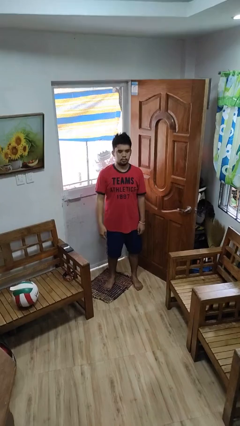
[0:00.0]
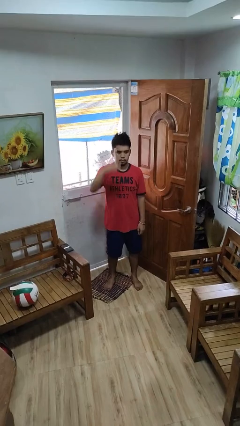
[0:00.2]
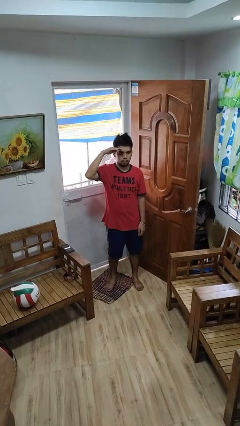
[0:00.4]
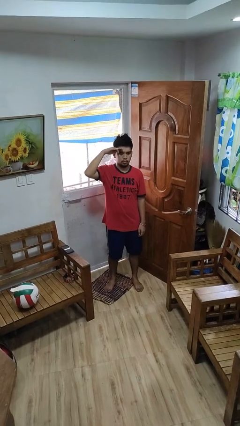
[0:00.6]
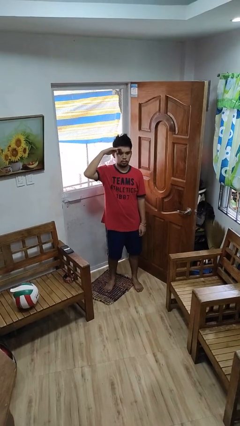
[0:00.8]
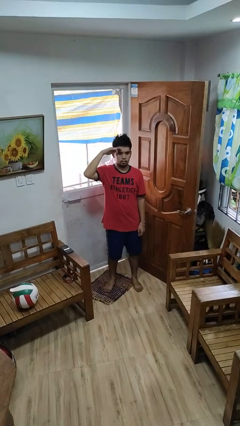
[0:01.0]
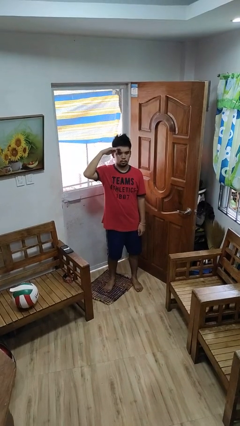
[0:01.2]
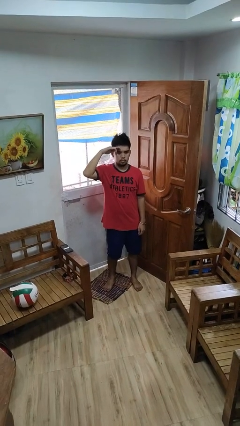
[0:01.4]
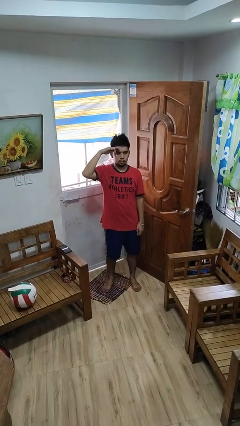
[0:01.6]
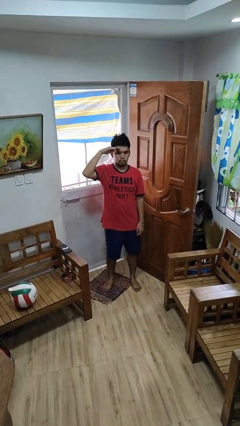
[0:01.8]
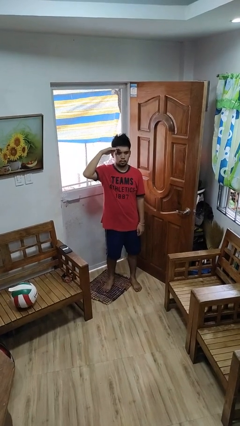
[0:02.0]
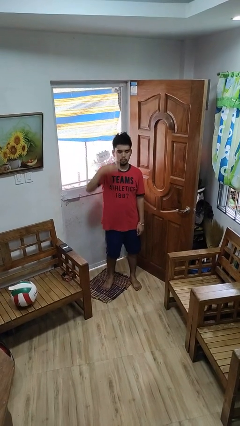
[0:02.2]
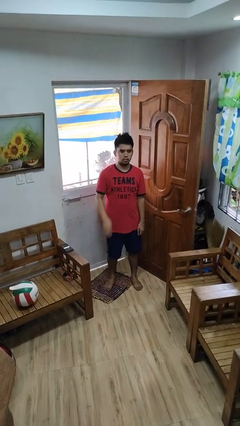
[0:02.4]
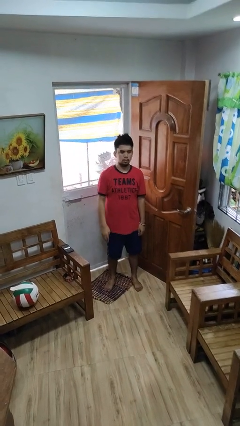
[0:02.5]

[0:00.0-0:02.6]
person salutes

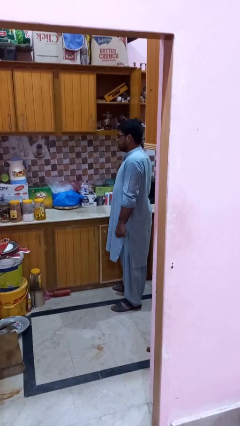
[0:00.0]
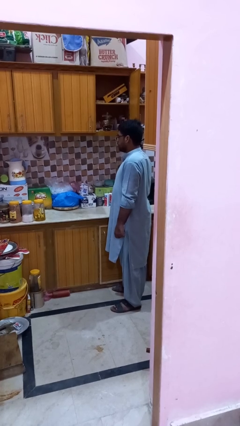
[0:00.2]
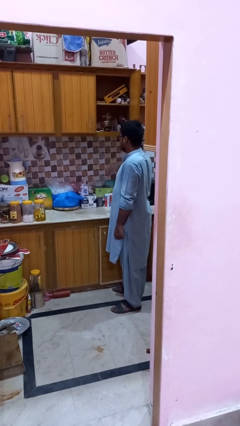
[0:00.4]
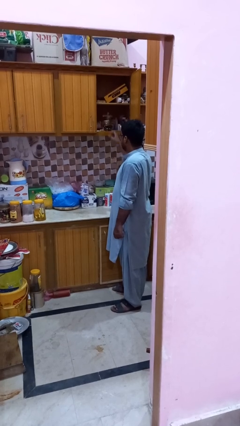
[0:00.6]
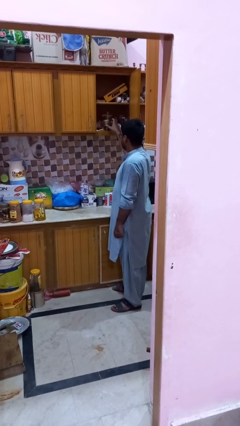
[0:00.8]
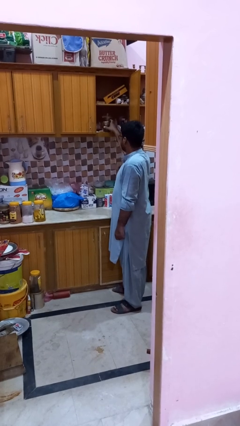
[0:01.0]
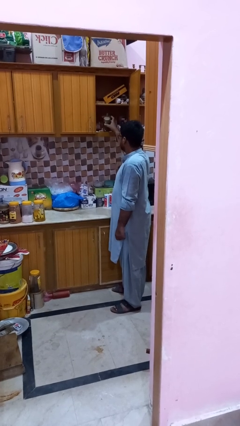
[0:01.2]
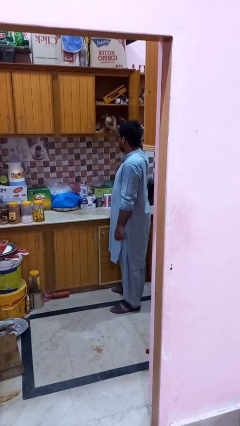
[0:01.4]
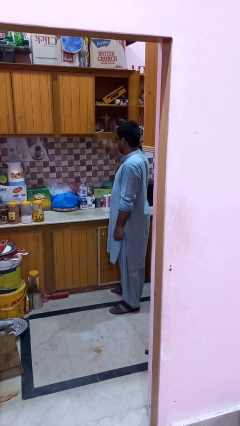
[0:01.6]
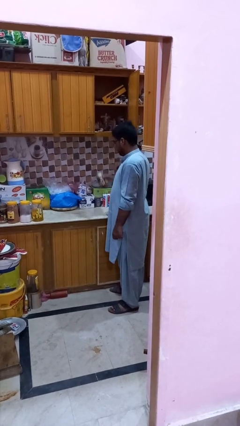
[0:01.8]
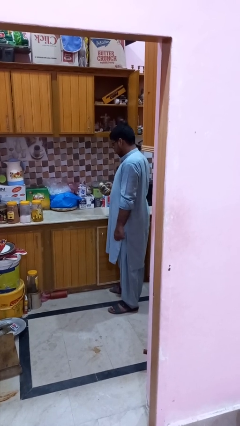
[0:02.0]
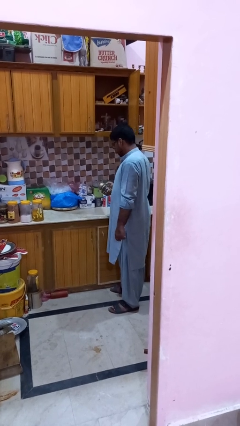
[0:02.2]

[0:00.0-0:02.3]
person picks up object from cabinet

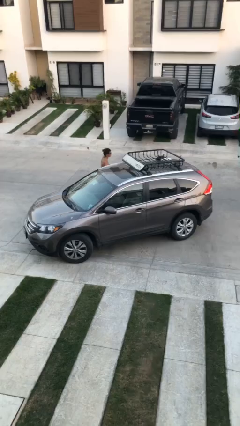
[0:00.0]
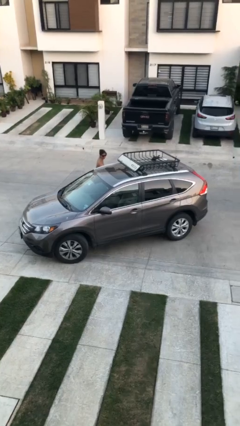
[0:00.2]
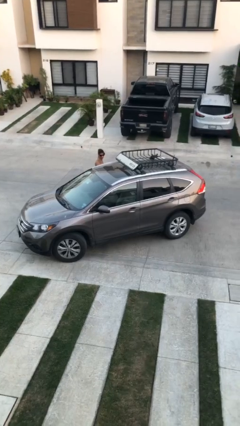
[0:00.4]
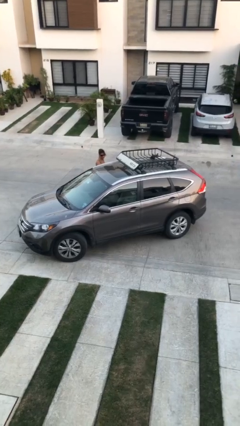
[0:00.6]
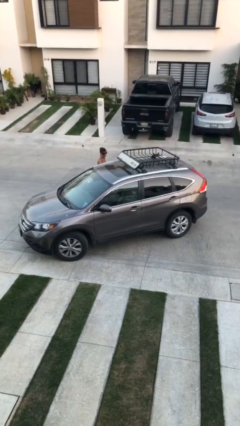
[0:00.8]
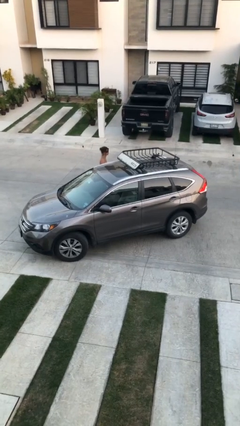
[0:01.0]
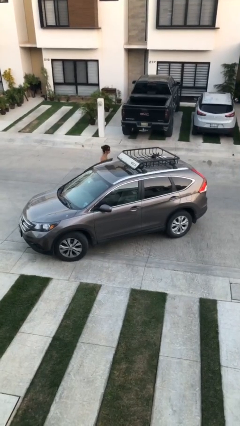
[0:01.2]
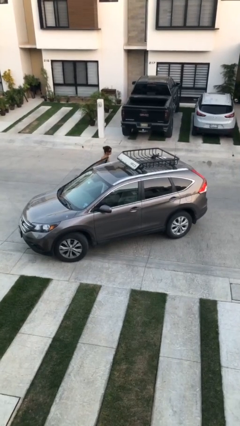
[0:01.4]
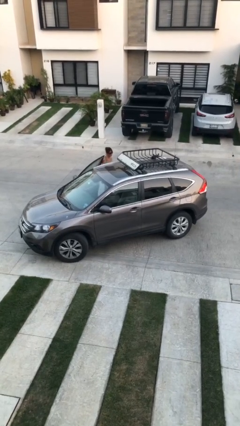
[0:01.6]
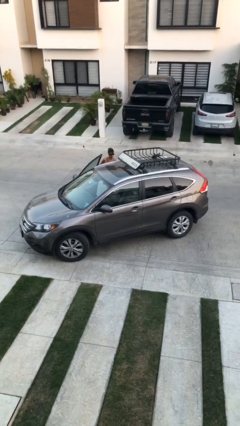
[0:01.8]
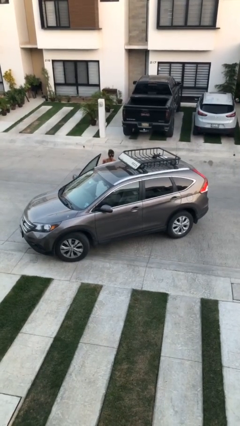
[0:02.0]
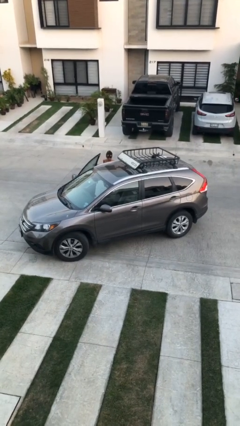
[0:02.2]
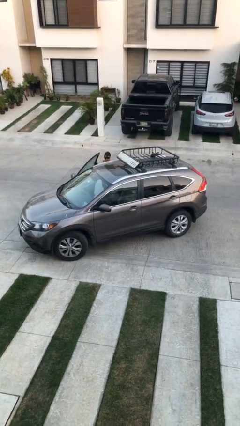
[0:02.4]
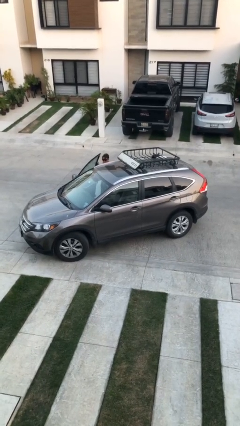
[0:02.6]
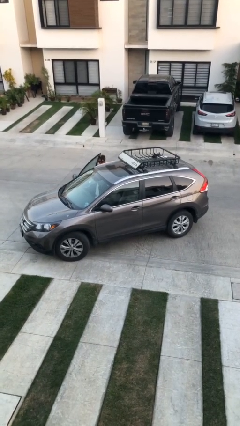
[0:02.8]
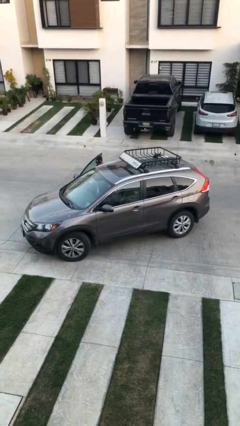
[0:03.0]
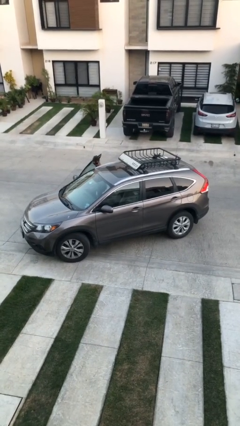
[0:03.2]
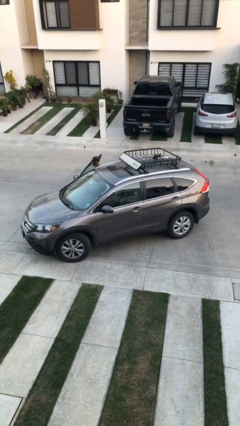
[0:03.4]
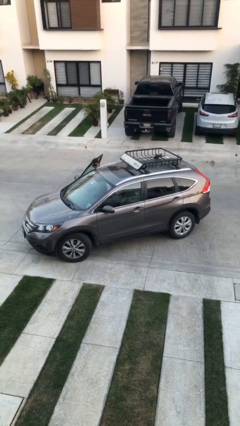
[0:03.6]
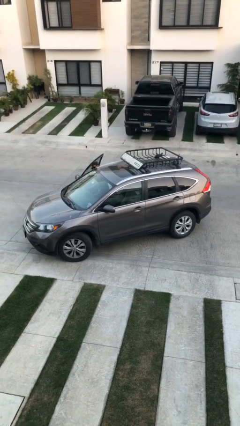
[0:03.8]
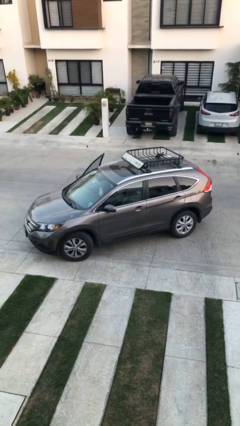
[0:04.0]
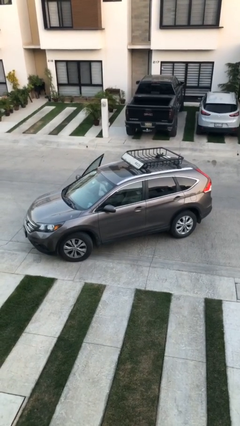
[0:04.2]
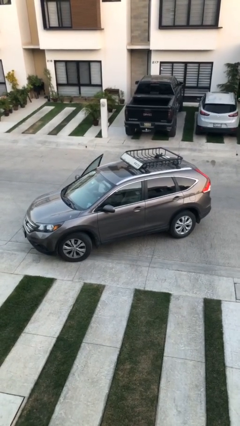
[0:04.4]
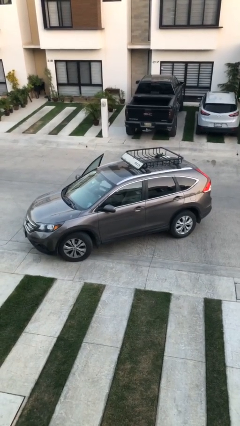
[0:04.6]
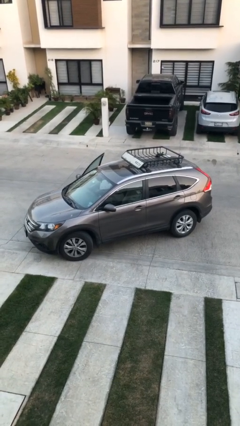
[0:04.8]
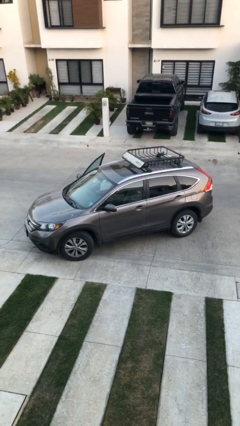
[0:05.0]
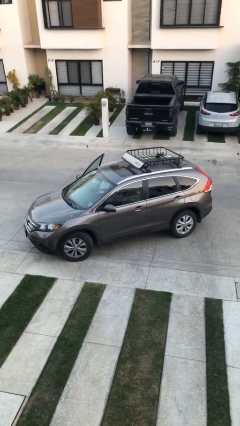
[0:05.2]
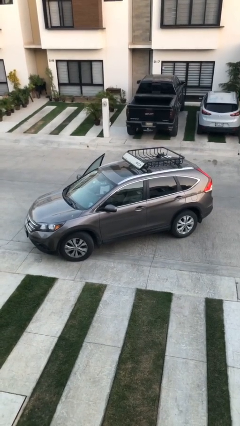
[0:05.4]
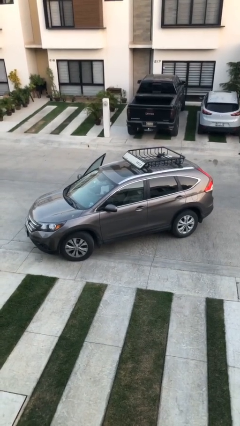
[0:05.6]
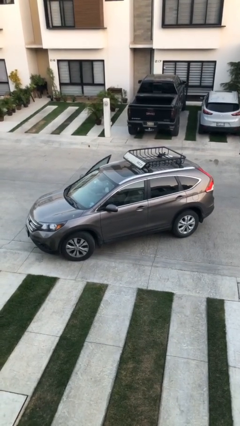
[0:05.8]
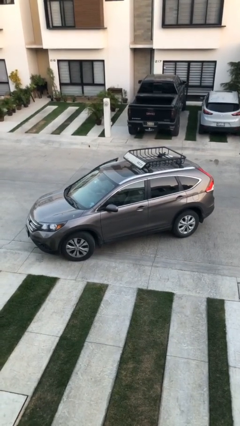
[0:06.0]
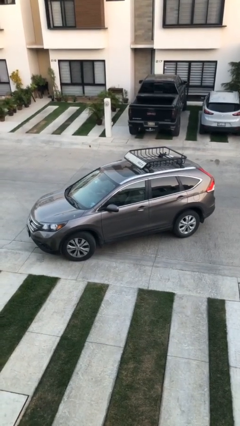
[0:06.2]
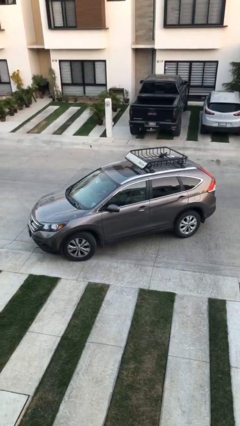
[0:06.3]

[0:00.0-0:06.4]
car picks up person

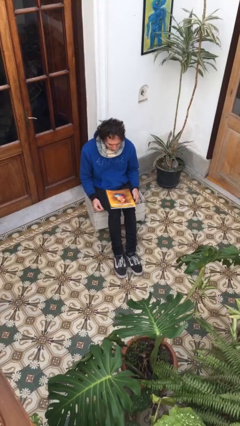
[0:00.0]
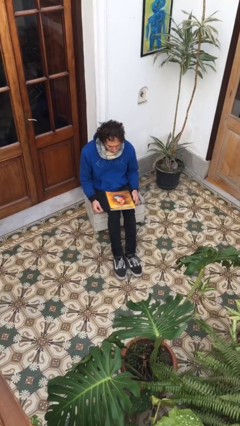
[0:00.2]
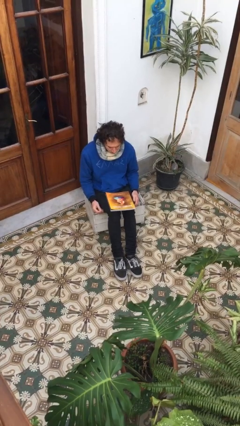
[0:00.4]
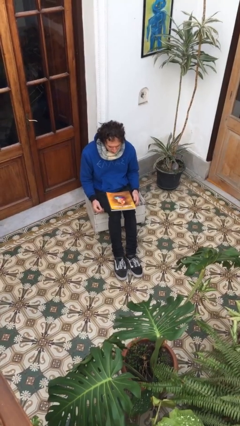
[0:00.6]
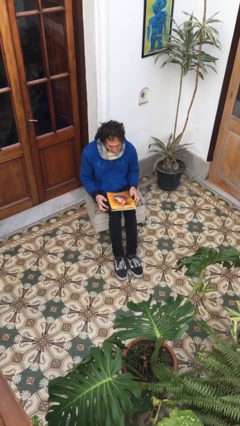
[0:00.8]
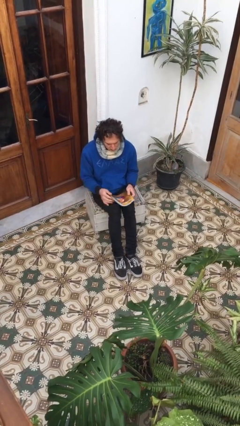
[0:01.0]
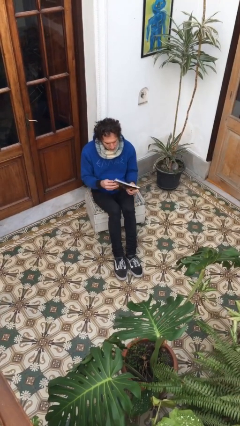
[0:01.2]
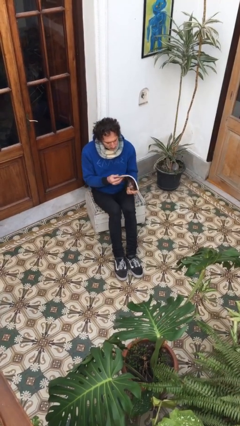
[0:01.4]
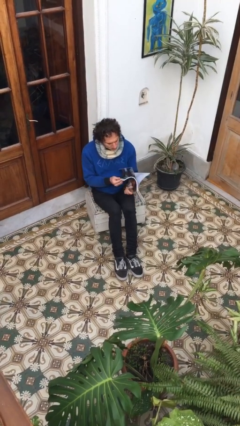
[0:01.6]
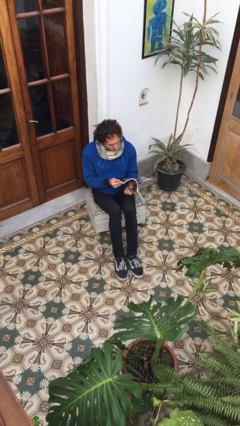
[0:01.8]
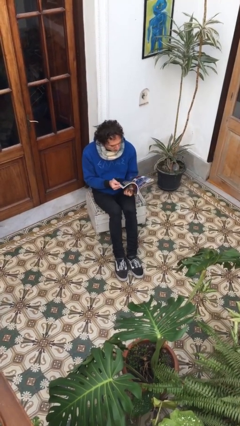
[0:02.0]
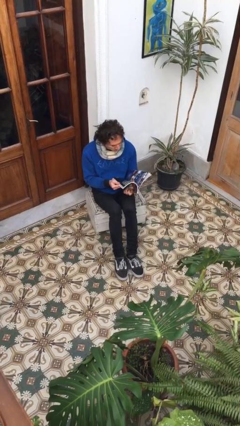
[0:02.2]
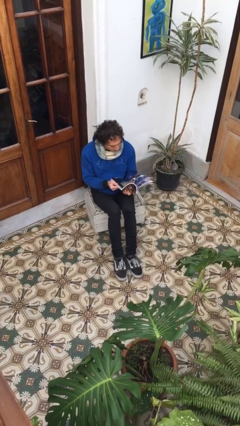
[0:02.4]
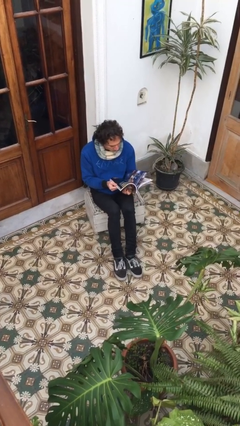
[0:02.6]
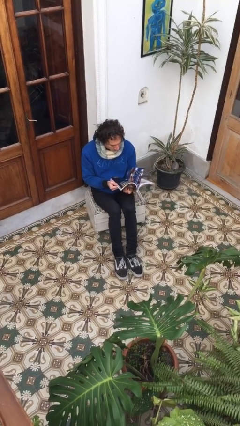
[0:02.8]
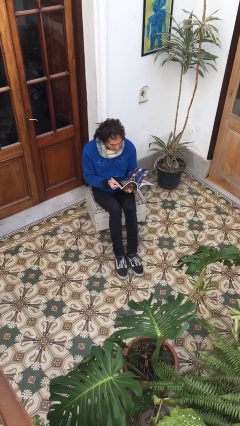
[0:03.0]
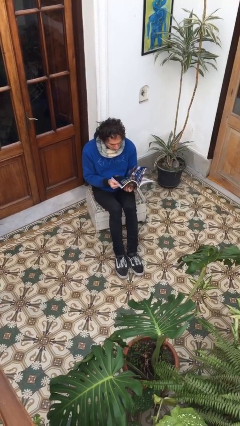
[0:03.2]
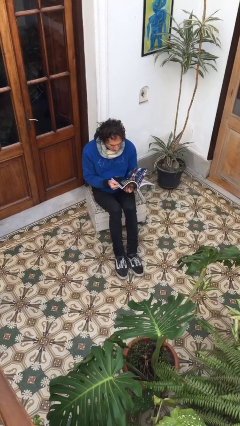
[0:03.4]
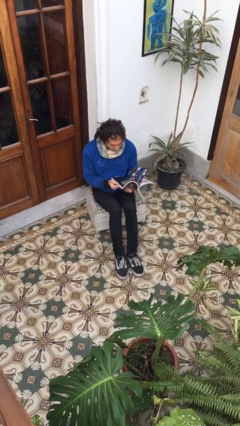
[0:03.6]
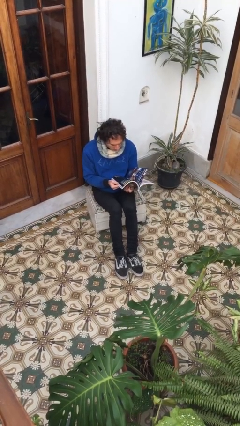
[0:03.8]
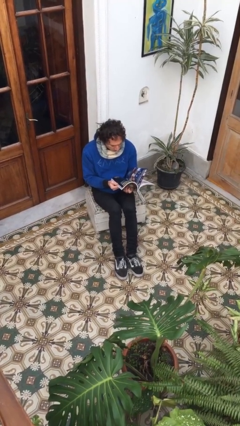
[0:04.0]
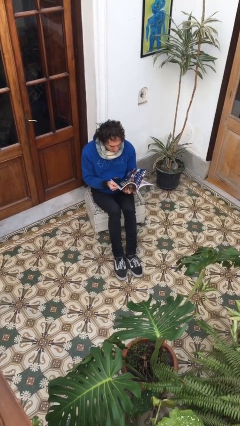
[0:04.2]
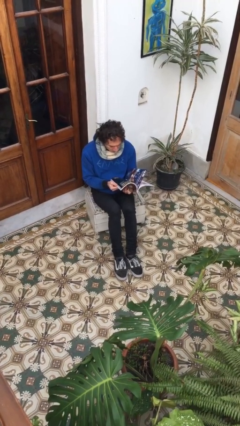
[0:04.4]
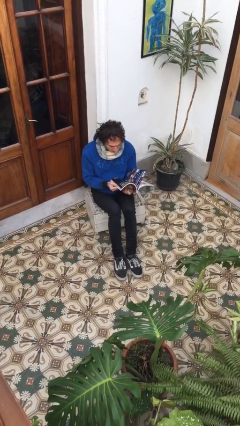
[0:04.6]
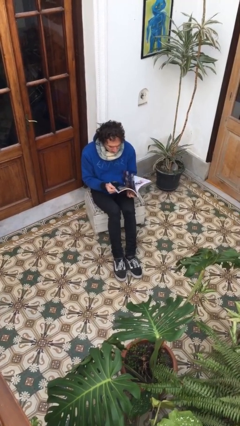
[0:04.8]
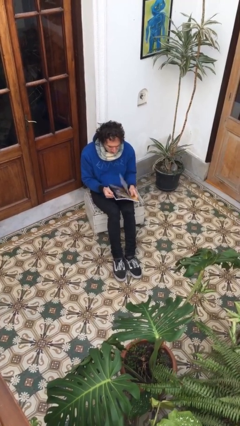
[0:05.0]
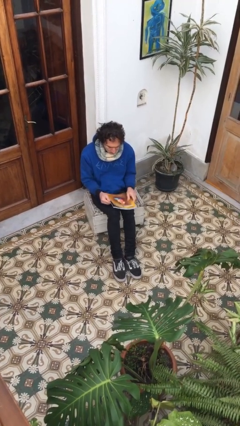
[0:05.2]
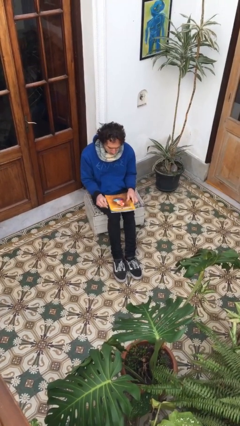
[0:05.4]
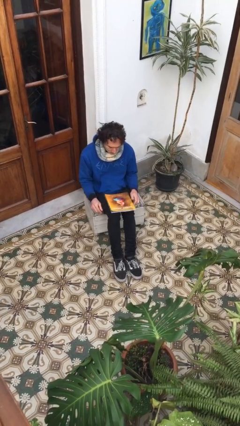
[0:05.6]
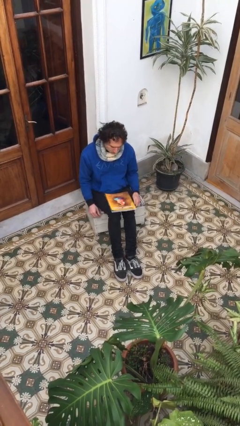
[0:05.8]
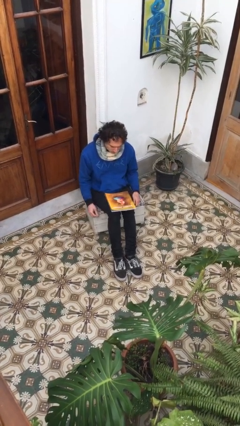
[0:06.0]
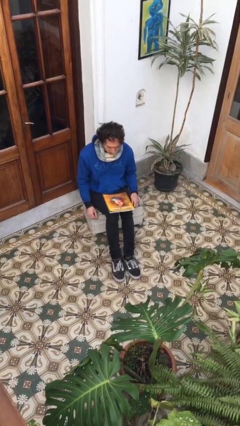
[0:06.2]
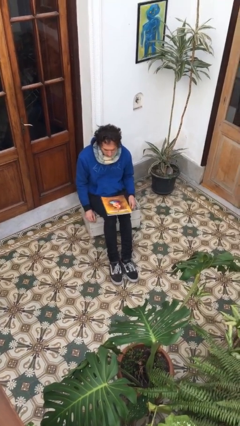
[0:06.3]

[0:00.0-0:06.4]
person reads magazine

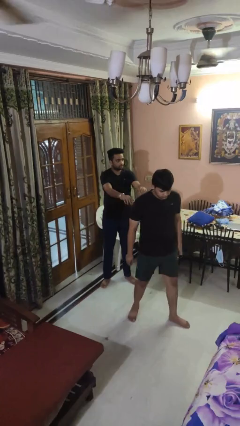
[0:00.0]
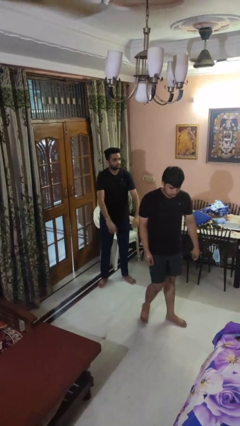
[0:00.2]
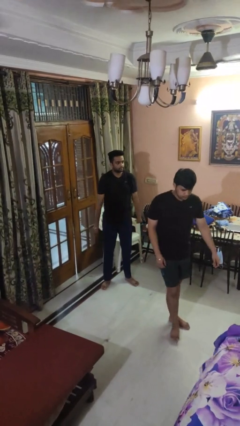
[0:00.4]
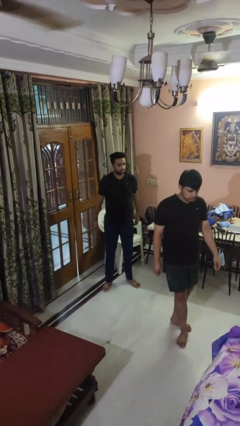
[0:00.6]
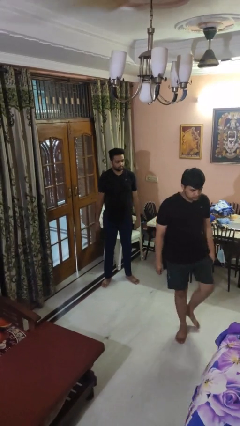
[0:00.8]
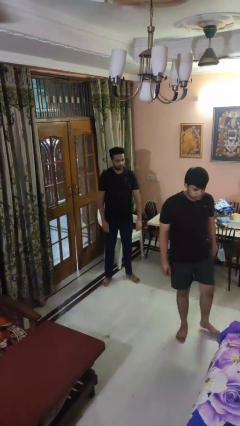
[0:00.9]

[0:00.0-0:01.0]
person shoves person
